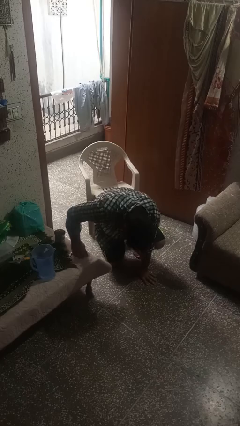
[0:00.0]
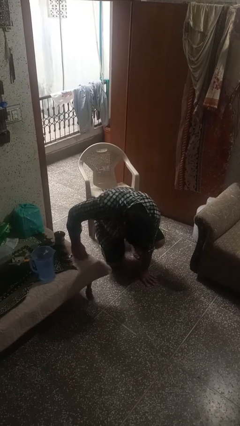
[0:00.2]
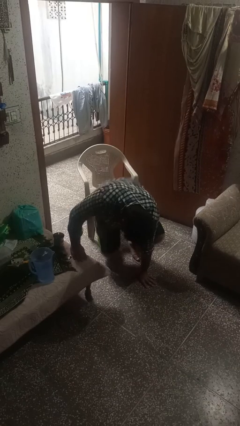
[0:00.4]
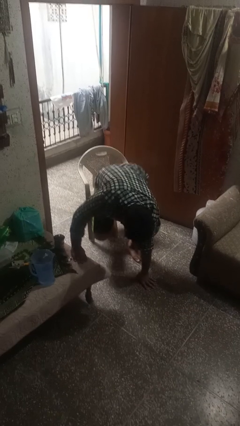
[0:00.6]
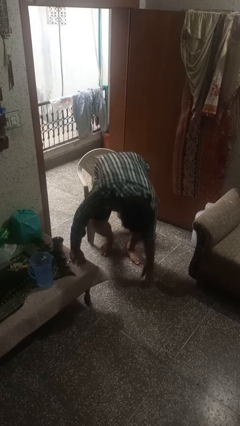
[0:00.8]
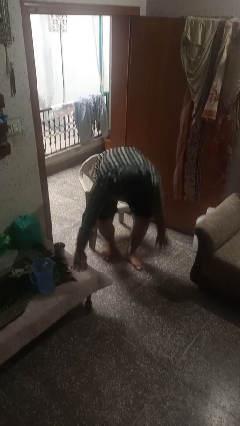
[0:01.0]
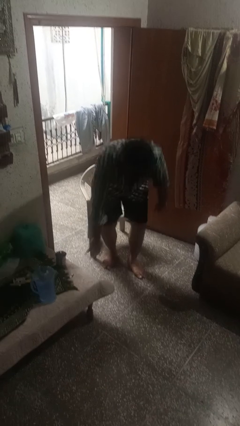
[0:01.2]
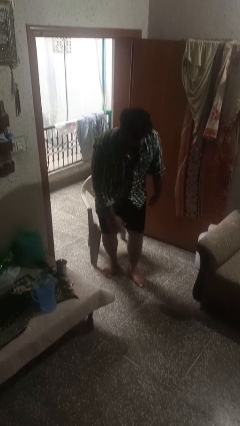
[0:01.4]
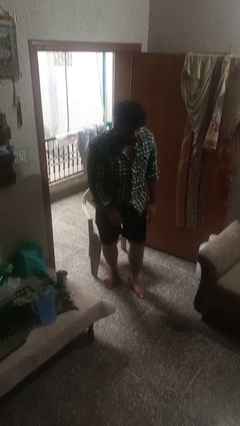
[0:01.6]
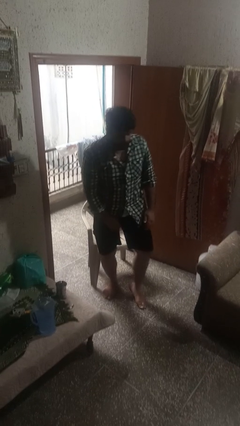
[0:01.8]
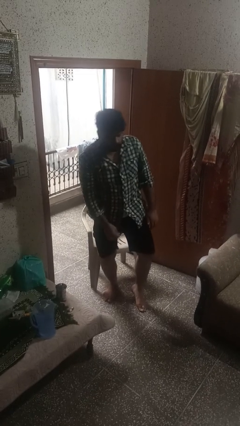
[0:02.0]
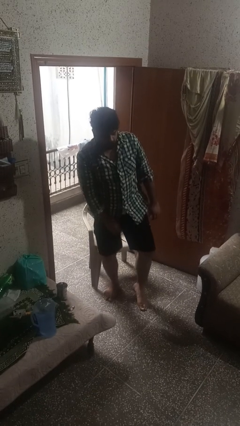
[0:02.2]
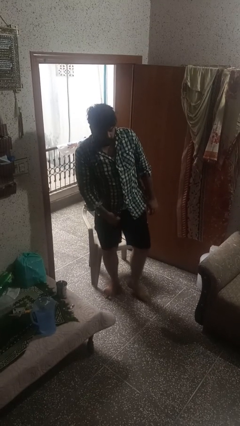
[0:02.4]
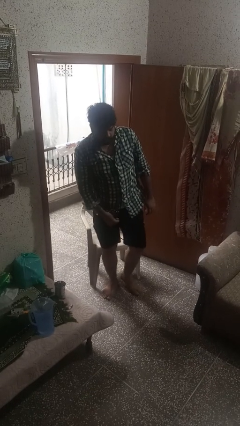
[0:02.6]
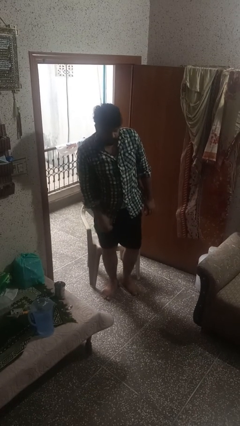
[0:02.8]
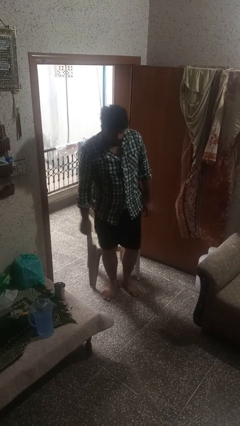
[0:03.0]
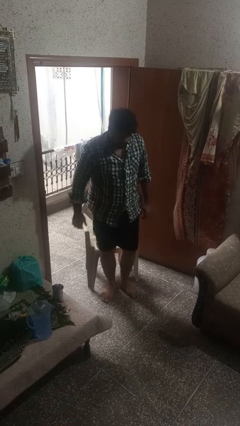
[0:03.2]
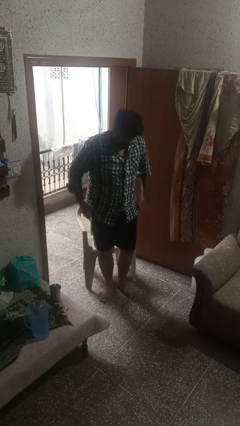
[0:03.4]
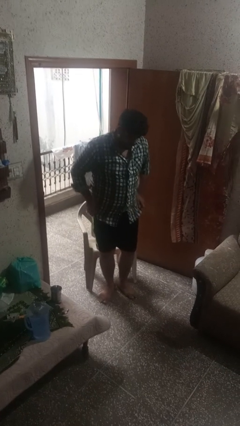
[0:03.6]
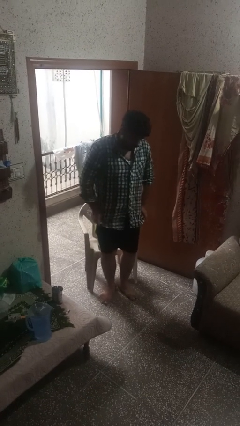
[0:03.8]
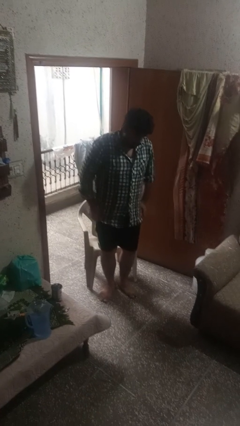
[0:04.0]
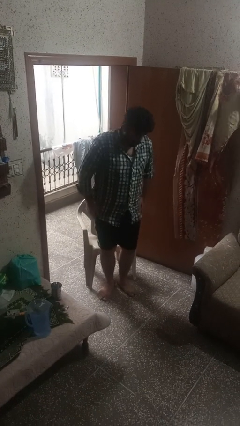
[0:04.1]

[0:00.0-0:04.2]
person stands up from floor

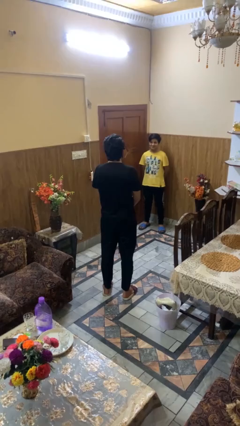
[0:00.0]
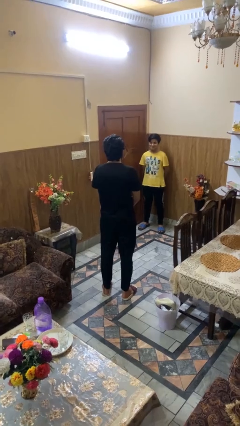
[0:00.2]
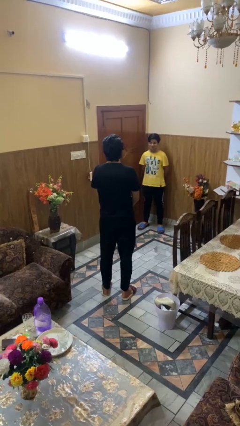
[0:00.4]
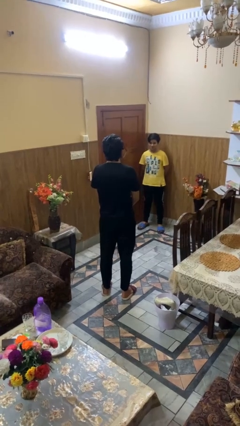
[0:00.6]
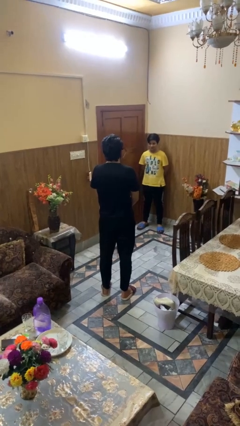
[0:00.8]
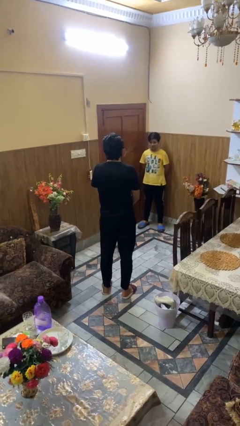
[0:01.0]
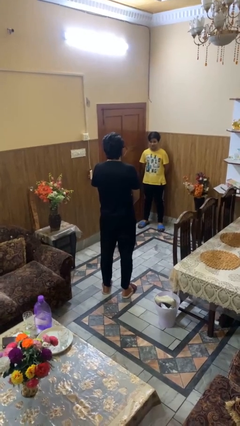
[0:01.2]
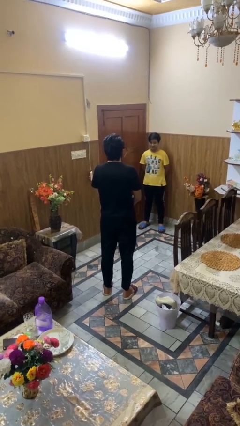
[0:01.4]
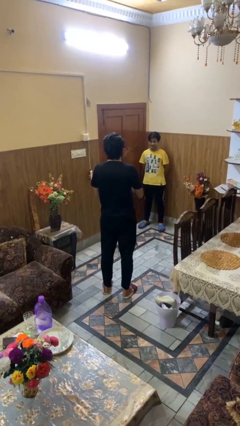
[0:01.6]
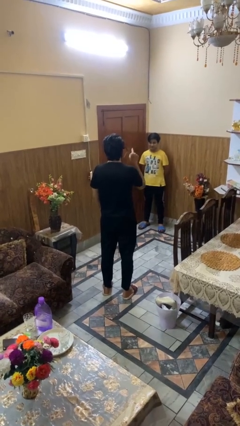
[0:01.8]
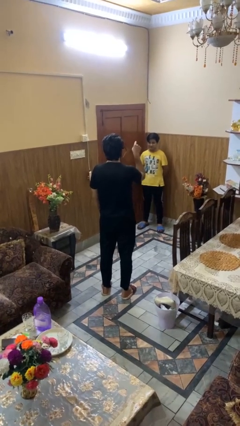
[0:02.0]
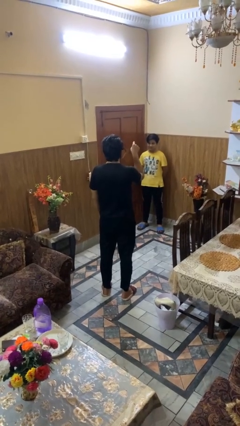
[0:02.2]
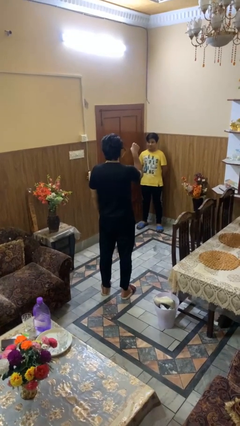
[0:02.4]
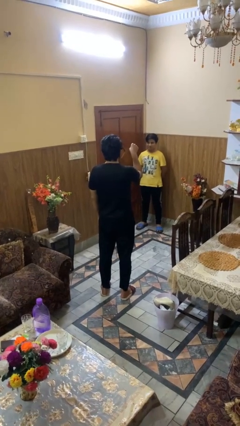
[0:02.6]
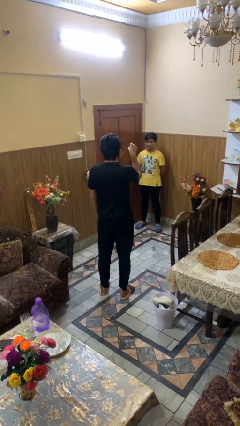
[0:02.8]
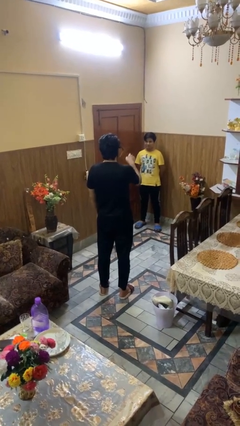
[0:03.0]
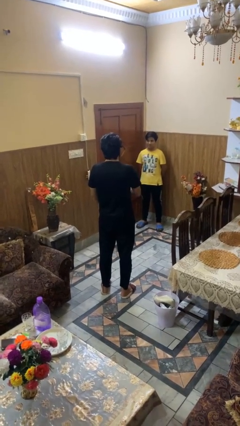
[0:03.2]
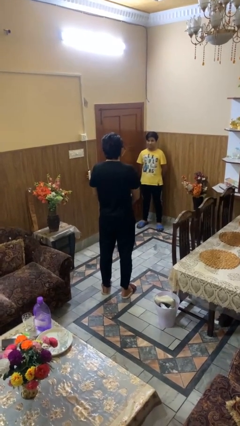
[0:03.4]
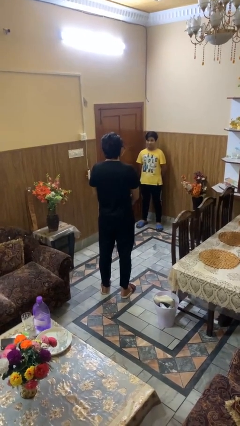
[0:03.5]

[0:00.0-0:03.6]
person points at person

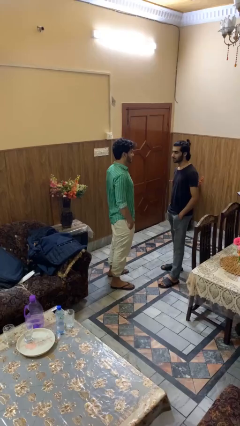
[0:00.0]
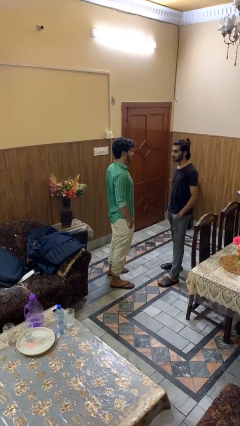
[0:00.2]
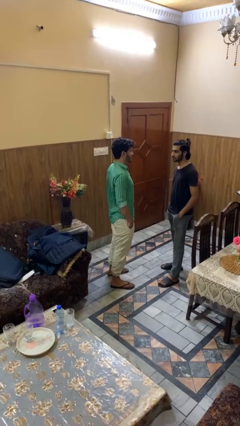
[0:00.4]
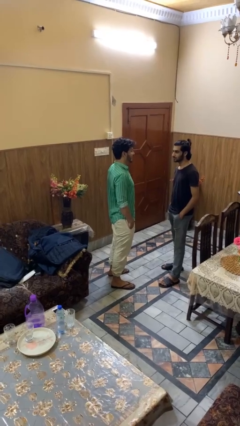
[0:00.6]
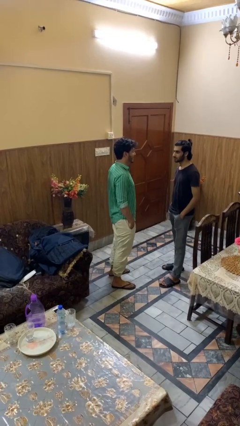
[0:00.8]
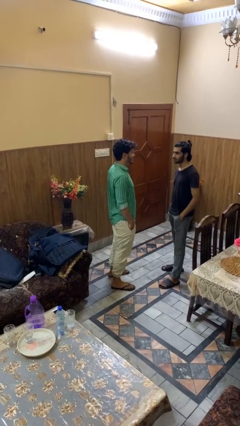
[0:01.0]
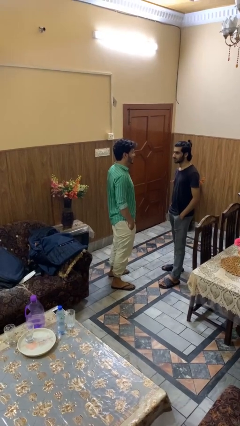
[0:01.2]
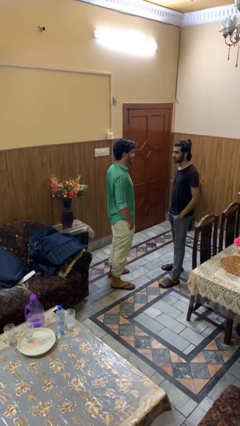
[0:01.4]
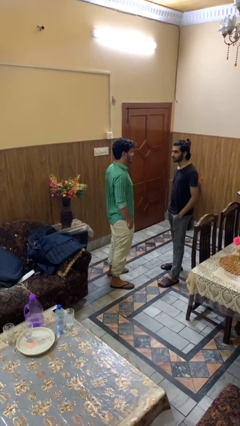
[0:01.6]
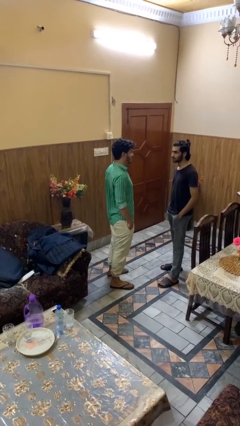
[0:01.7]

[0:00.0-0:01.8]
person laughs with person

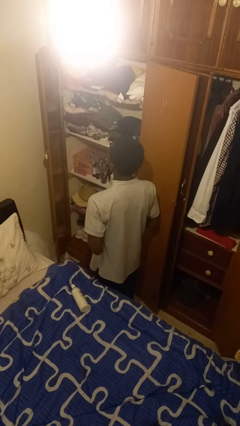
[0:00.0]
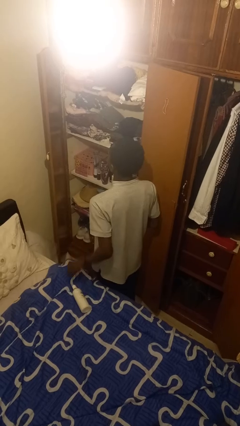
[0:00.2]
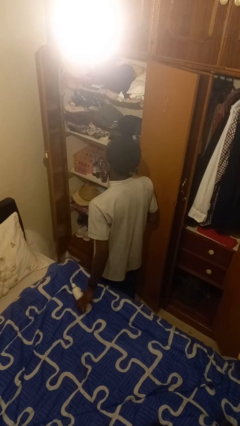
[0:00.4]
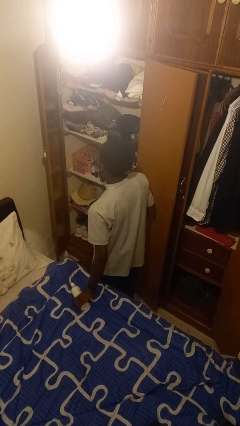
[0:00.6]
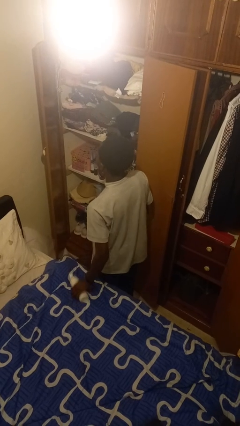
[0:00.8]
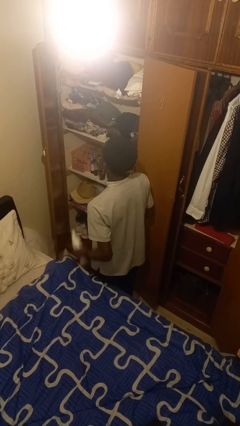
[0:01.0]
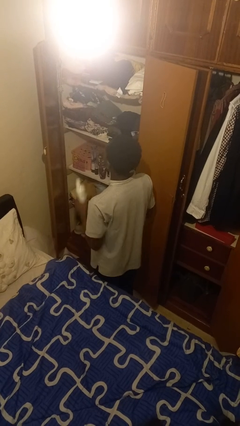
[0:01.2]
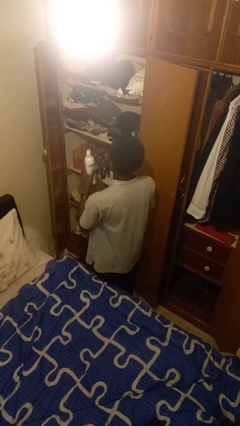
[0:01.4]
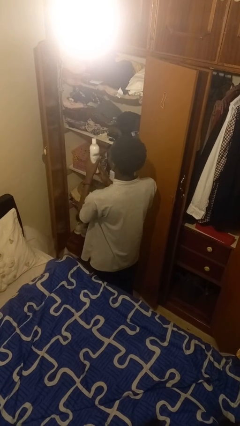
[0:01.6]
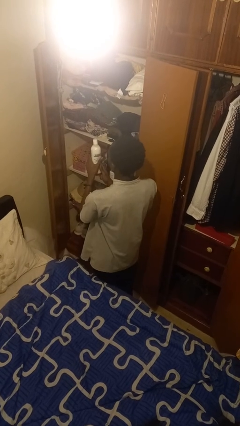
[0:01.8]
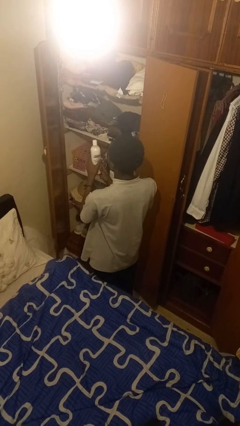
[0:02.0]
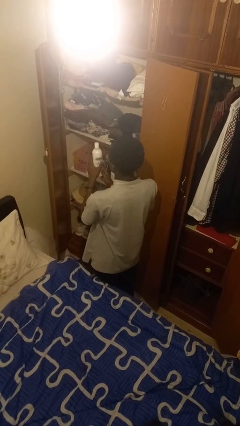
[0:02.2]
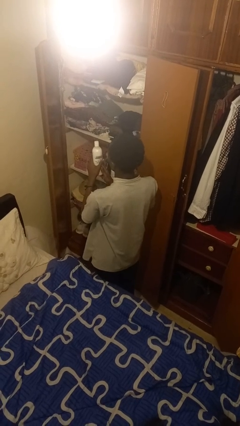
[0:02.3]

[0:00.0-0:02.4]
person picks up object from bed

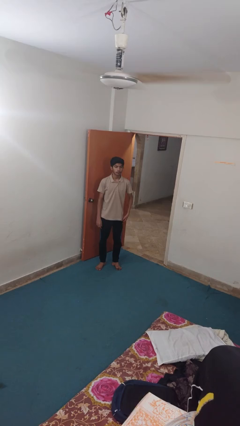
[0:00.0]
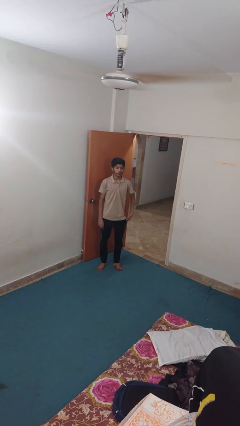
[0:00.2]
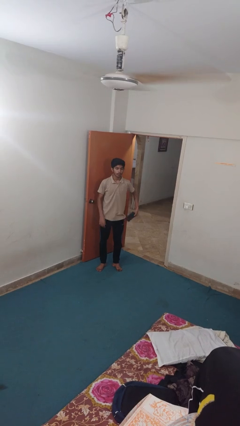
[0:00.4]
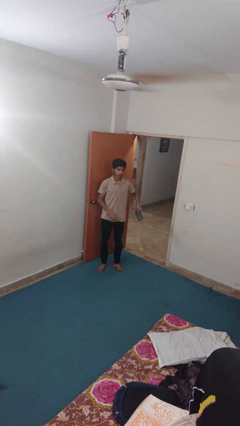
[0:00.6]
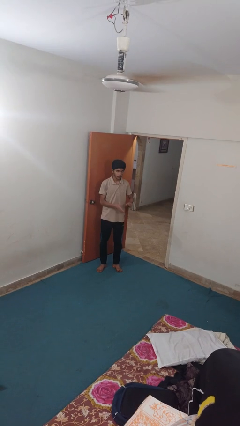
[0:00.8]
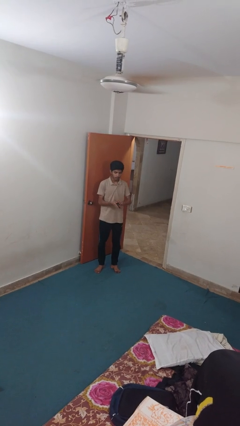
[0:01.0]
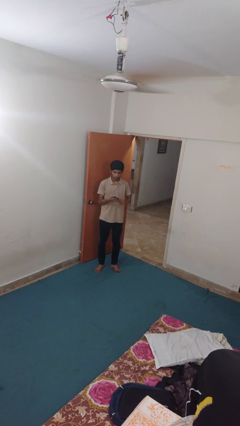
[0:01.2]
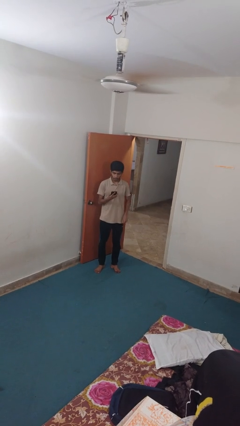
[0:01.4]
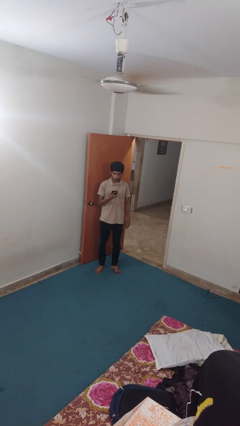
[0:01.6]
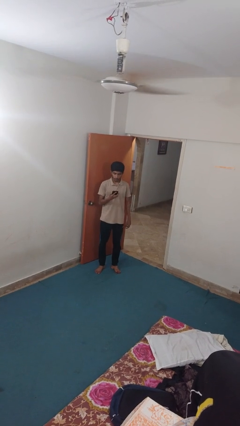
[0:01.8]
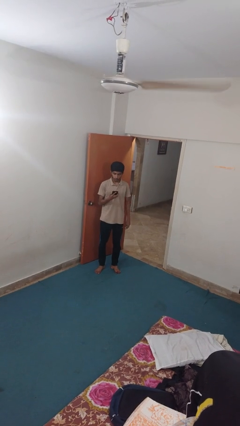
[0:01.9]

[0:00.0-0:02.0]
person takes phone from pocket

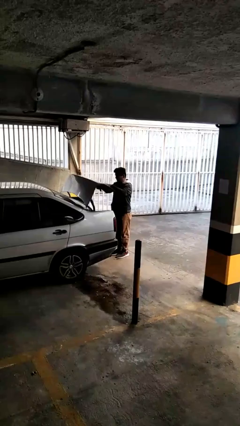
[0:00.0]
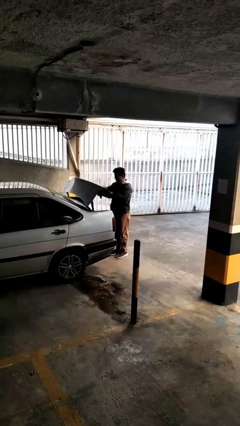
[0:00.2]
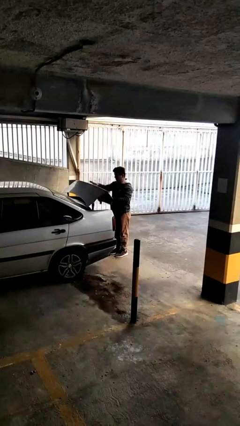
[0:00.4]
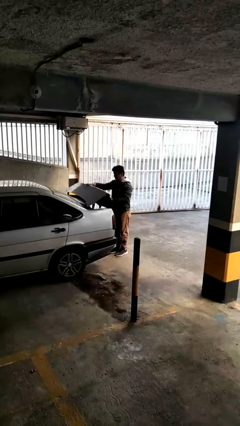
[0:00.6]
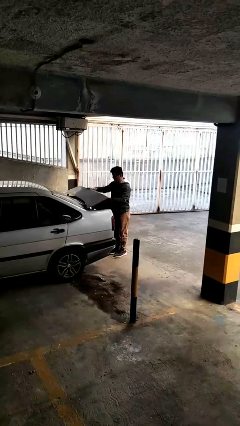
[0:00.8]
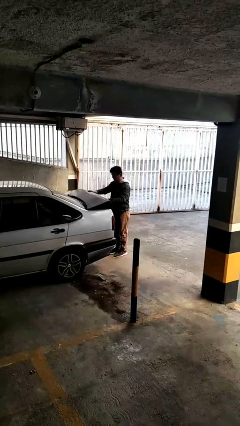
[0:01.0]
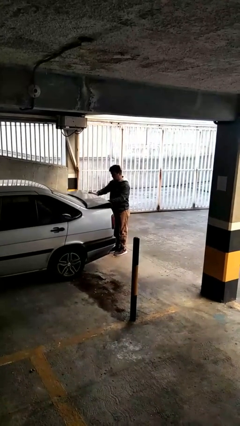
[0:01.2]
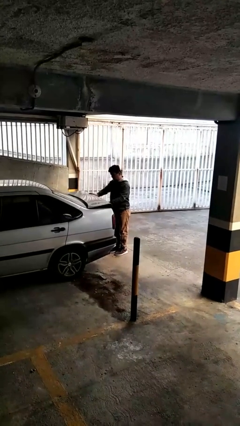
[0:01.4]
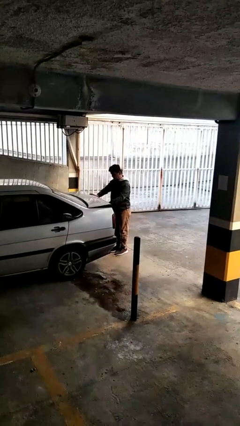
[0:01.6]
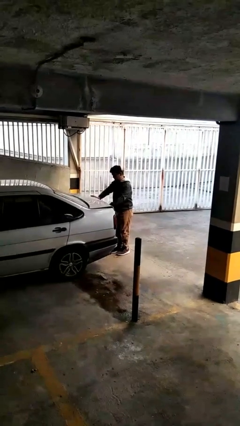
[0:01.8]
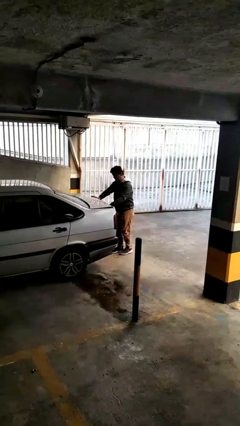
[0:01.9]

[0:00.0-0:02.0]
person closes car trunk

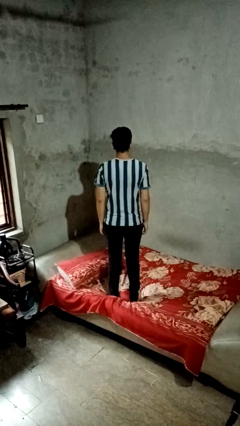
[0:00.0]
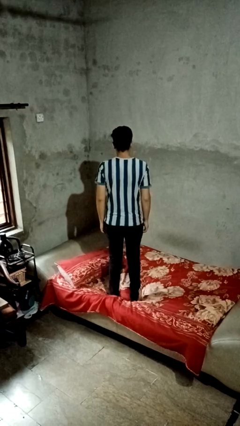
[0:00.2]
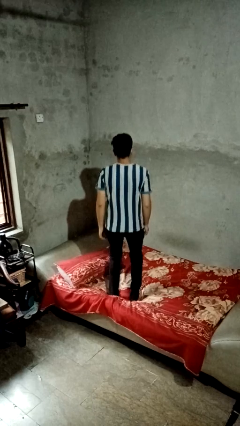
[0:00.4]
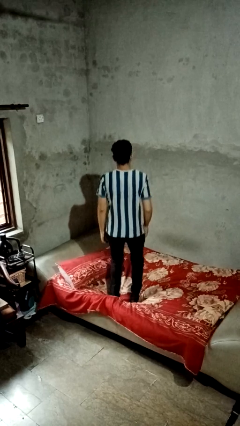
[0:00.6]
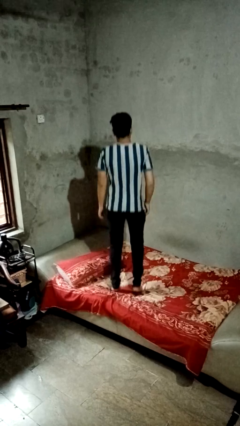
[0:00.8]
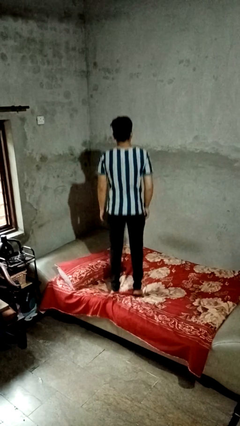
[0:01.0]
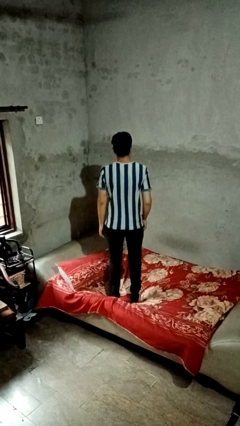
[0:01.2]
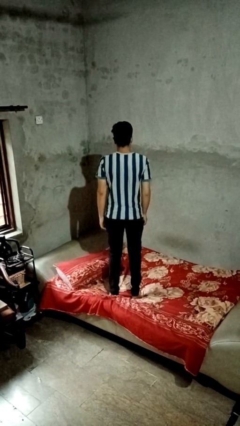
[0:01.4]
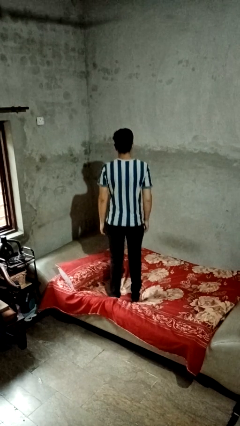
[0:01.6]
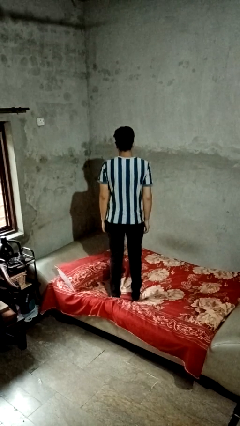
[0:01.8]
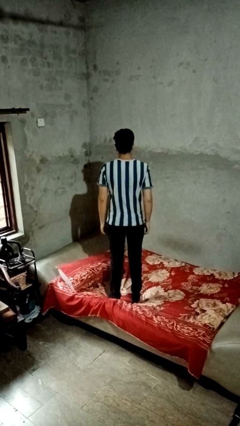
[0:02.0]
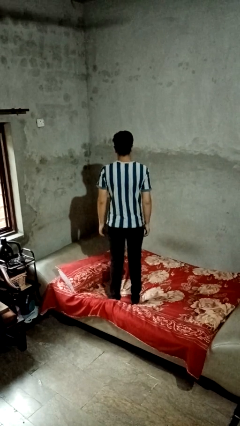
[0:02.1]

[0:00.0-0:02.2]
person jumps on bed
